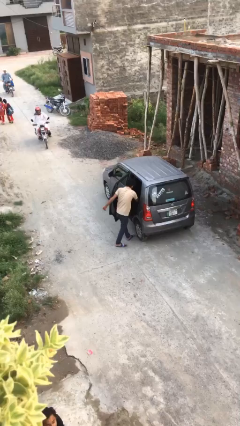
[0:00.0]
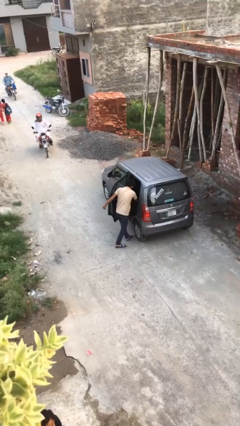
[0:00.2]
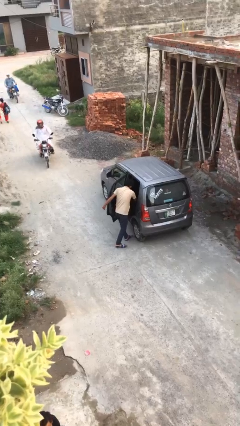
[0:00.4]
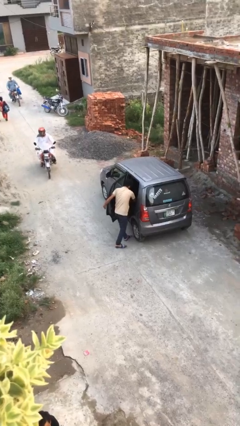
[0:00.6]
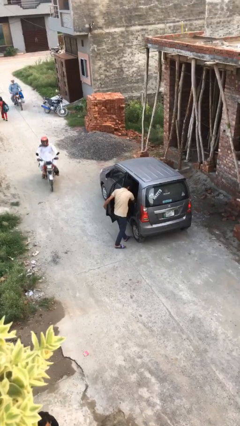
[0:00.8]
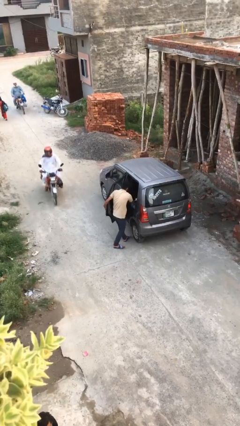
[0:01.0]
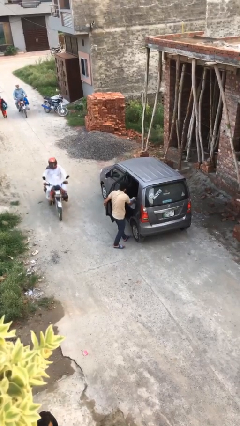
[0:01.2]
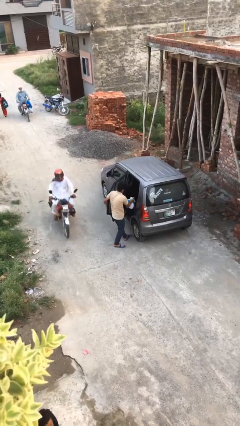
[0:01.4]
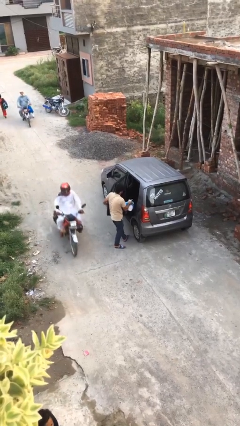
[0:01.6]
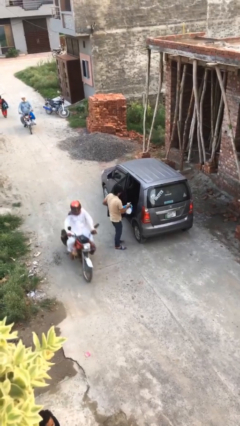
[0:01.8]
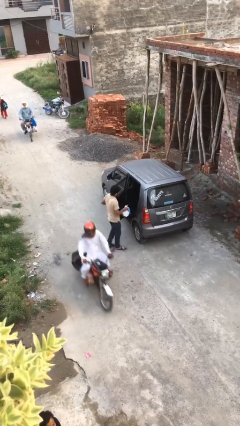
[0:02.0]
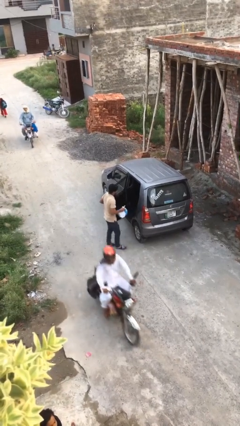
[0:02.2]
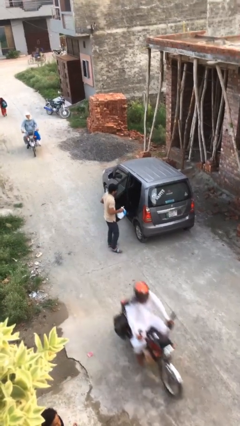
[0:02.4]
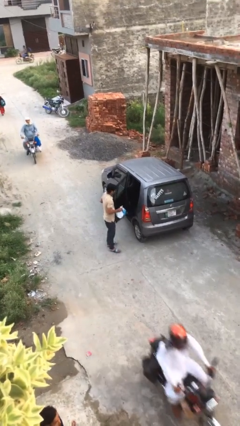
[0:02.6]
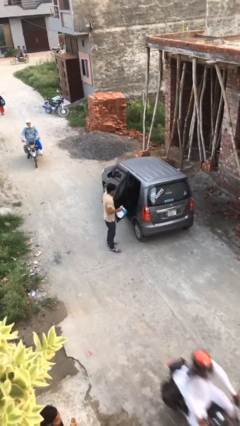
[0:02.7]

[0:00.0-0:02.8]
person unloads car

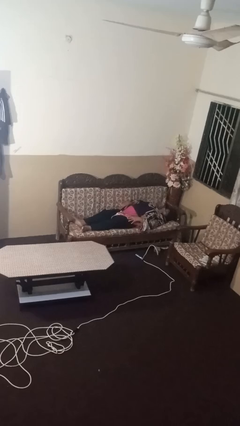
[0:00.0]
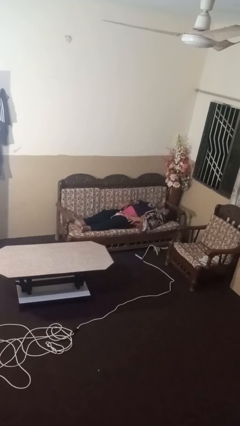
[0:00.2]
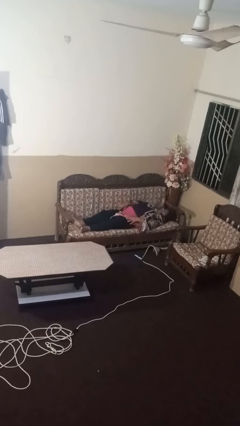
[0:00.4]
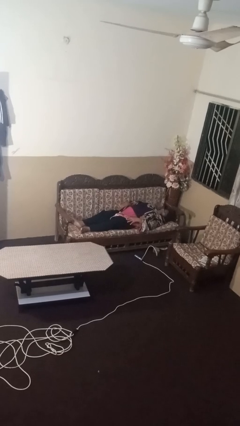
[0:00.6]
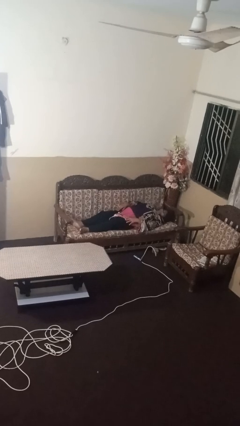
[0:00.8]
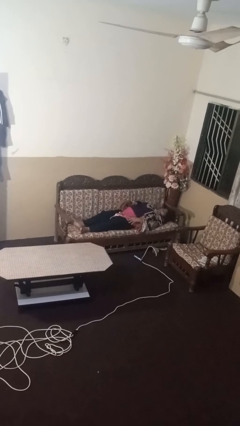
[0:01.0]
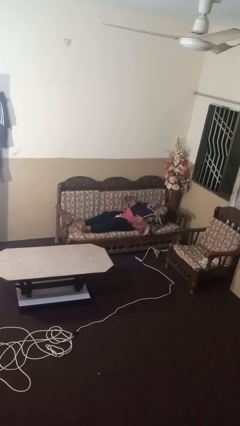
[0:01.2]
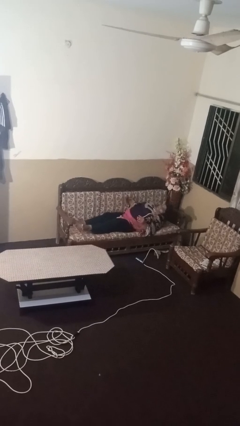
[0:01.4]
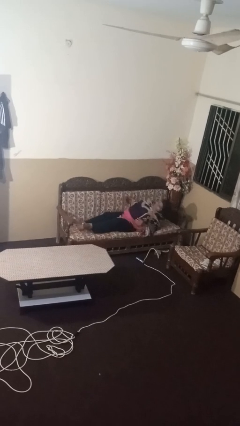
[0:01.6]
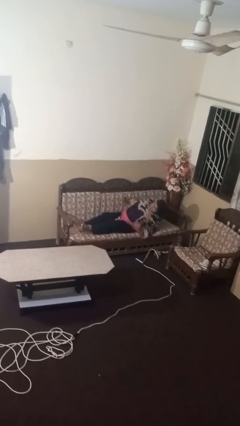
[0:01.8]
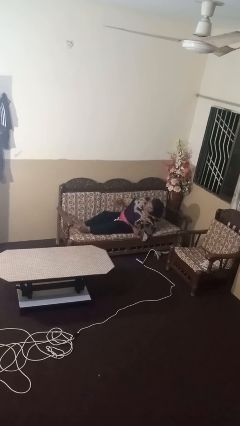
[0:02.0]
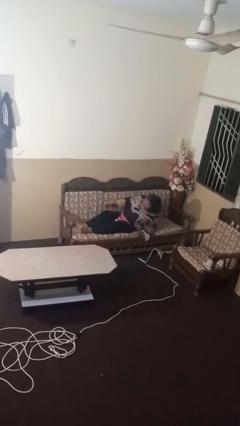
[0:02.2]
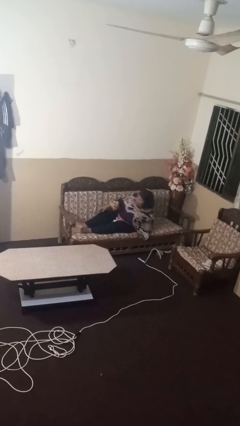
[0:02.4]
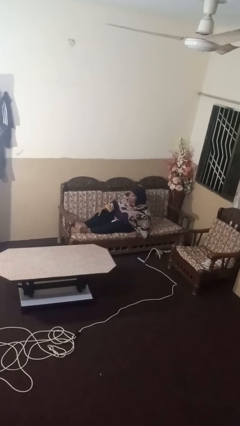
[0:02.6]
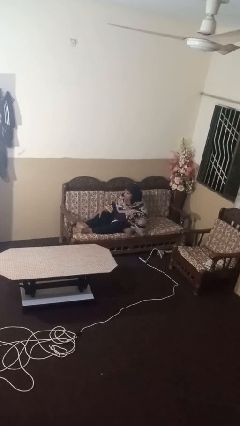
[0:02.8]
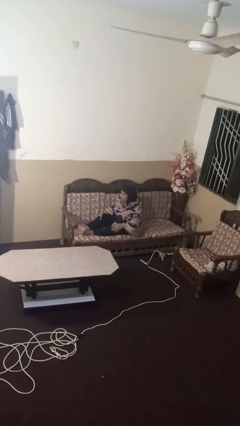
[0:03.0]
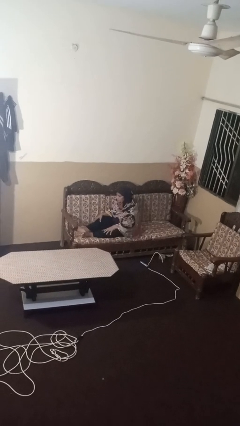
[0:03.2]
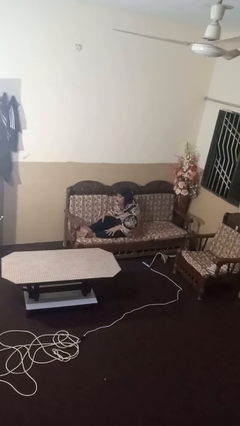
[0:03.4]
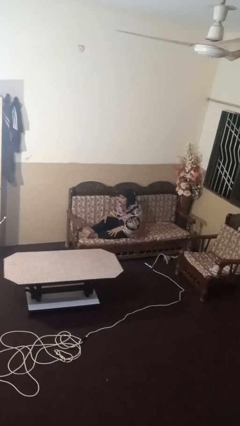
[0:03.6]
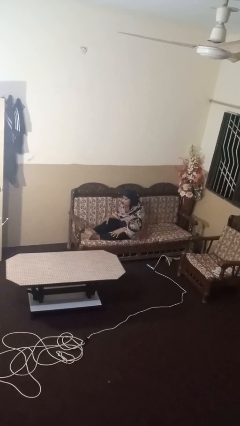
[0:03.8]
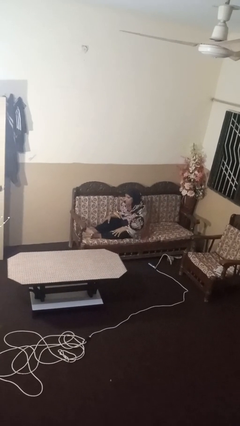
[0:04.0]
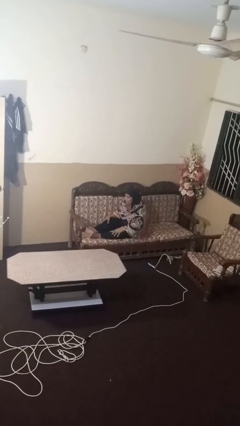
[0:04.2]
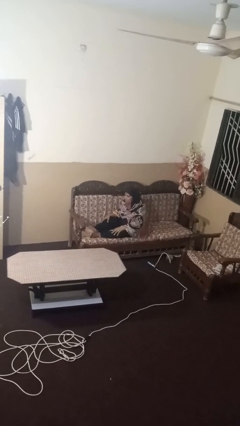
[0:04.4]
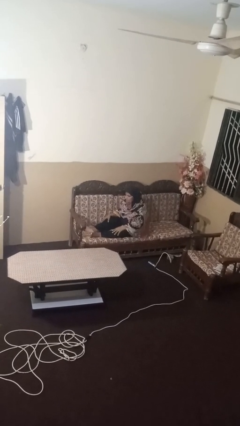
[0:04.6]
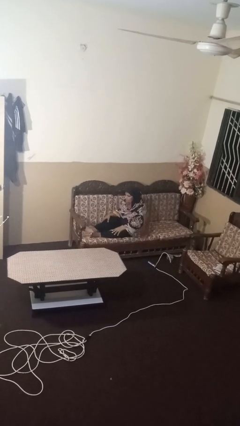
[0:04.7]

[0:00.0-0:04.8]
person stands up

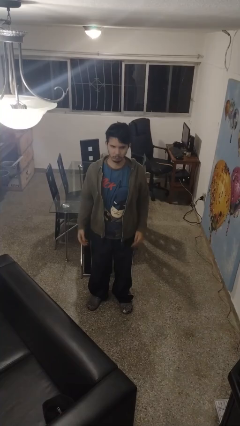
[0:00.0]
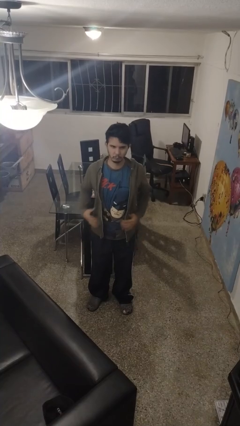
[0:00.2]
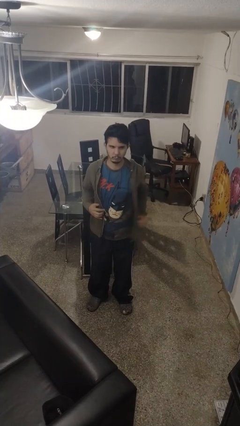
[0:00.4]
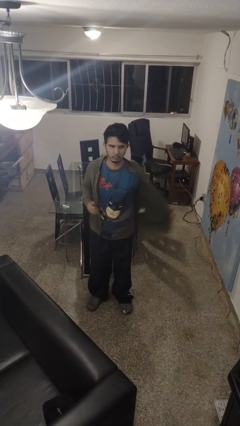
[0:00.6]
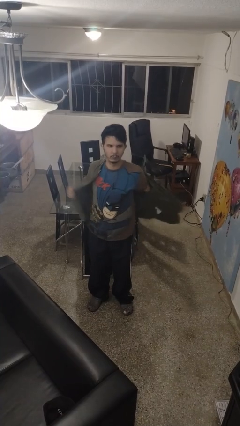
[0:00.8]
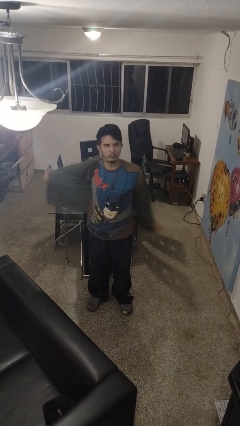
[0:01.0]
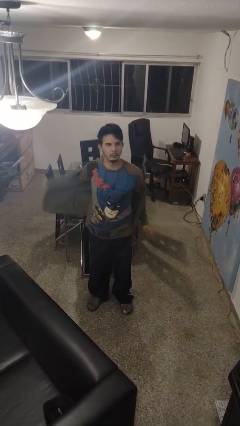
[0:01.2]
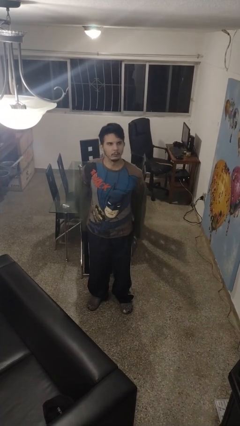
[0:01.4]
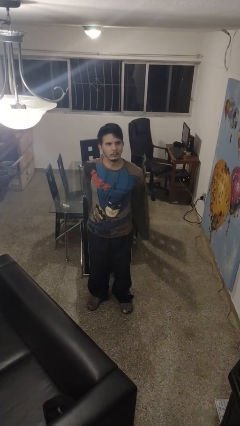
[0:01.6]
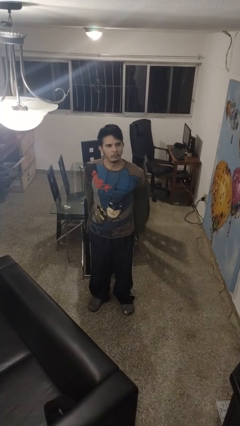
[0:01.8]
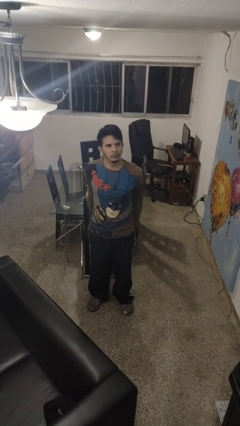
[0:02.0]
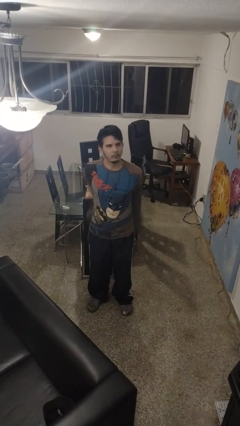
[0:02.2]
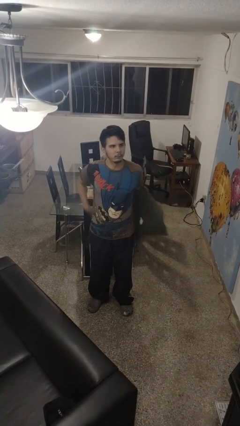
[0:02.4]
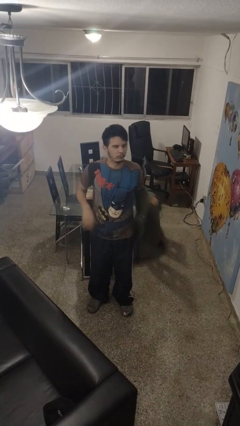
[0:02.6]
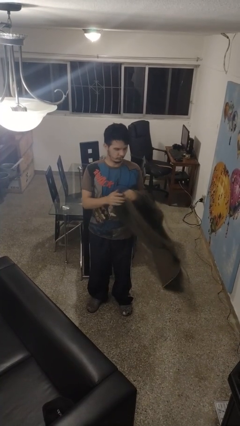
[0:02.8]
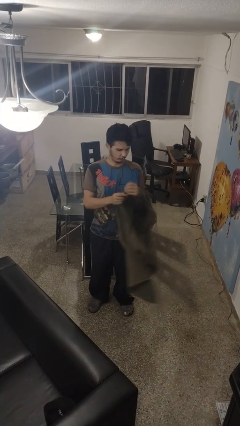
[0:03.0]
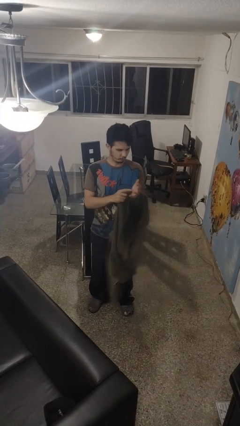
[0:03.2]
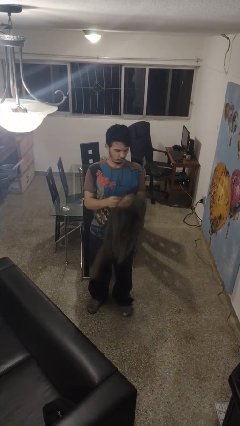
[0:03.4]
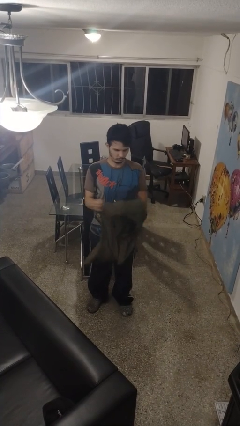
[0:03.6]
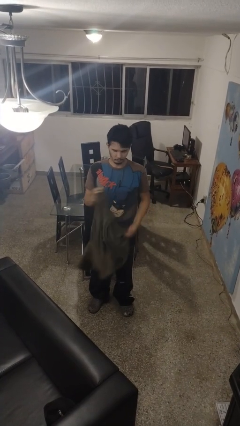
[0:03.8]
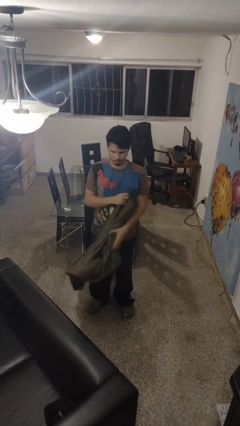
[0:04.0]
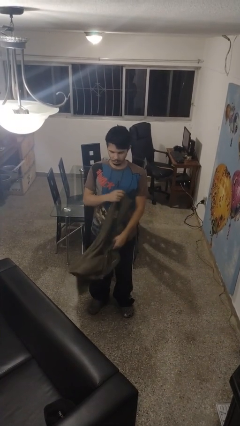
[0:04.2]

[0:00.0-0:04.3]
person takes off jacket

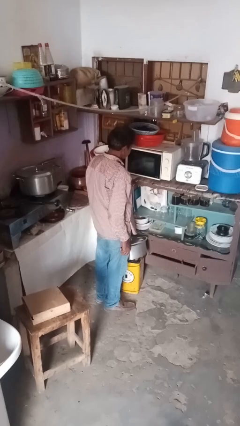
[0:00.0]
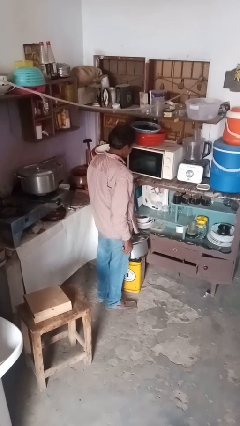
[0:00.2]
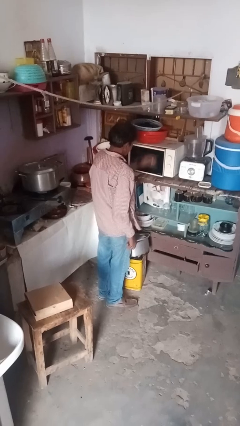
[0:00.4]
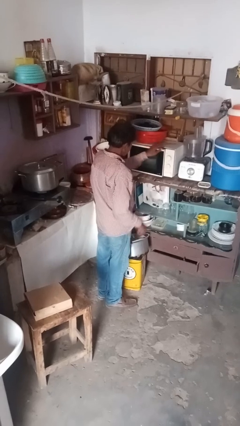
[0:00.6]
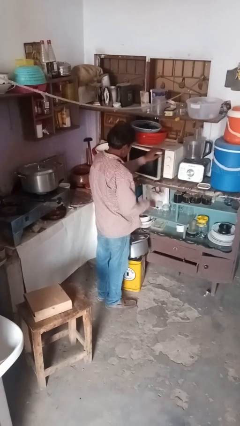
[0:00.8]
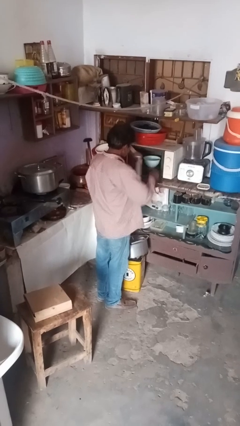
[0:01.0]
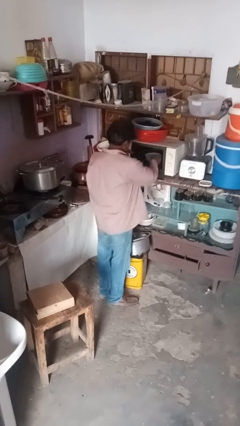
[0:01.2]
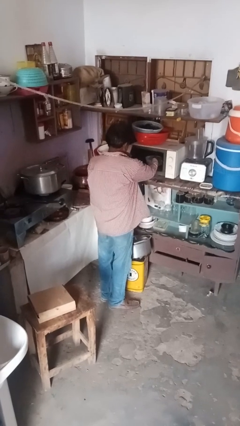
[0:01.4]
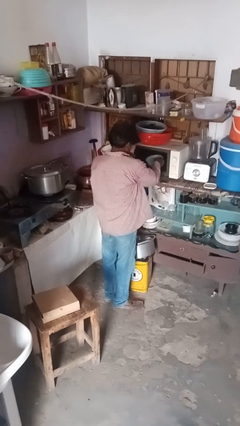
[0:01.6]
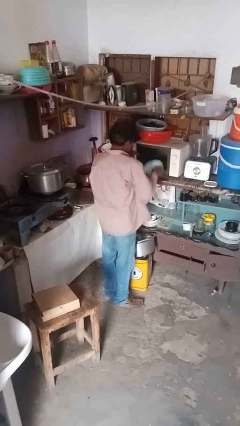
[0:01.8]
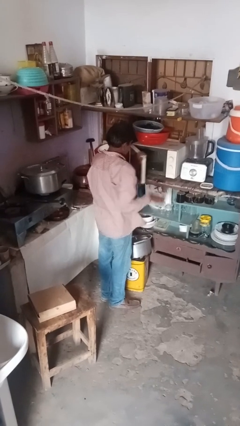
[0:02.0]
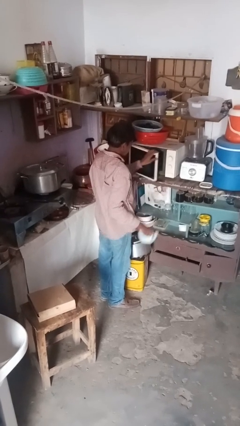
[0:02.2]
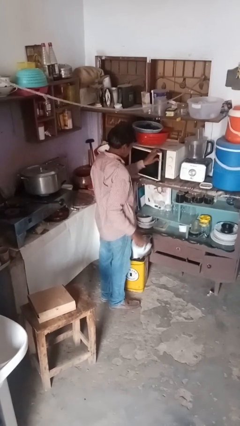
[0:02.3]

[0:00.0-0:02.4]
person takes object from microwave

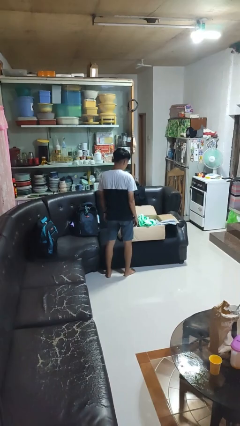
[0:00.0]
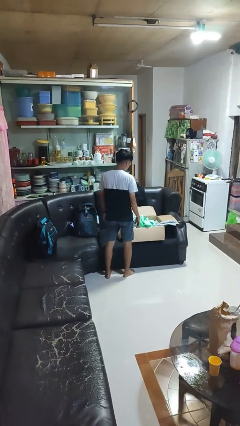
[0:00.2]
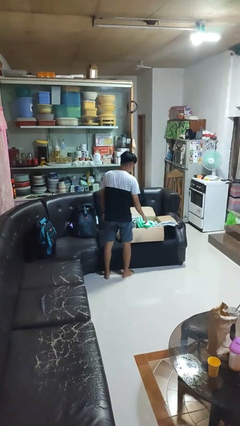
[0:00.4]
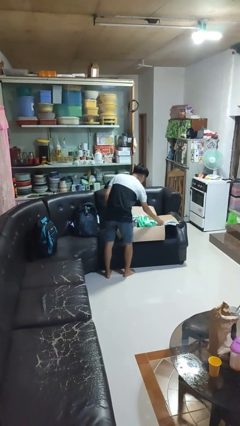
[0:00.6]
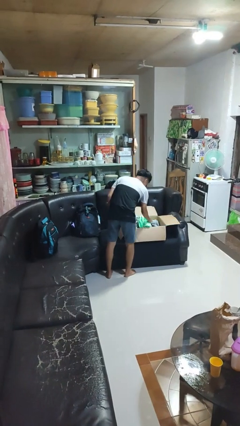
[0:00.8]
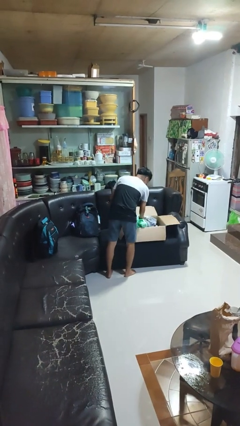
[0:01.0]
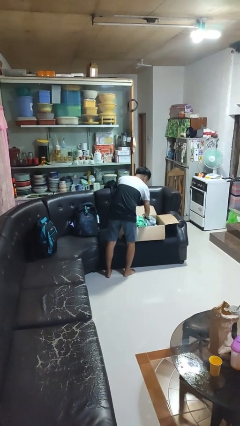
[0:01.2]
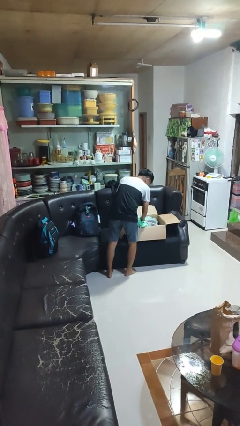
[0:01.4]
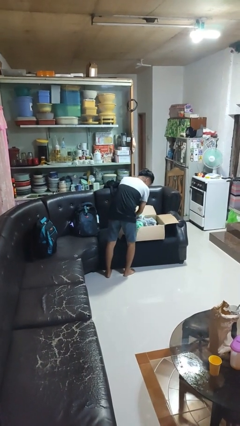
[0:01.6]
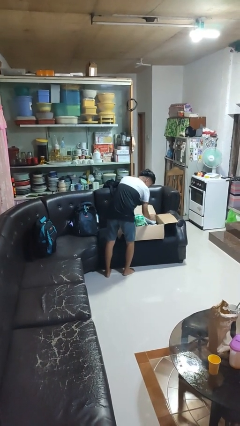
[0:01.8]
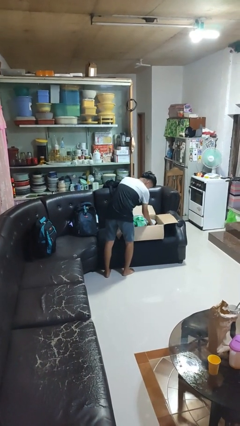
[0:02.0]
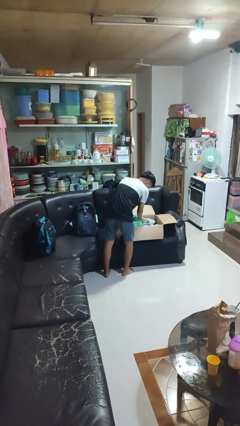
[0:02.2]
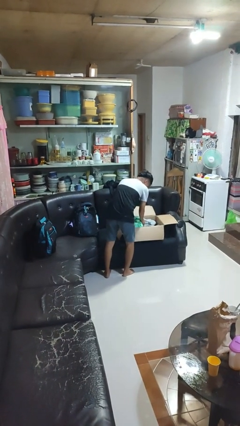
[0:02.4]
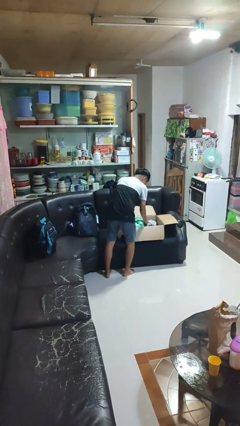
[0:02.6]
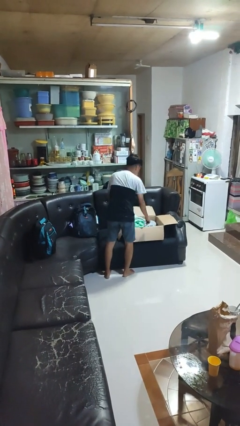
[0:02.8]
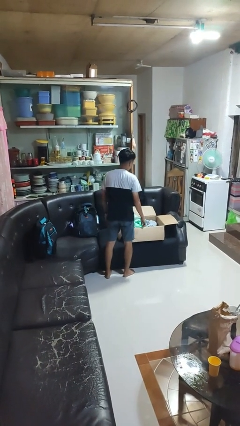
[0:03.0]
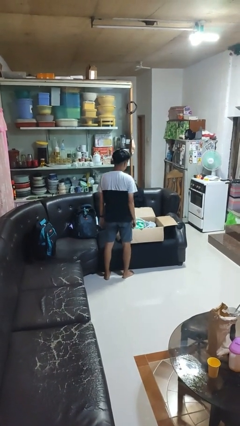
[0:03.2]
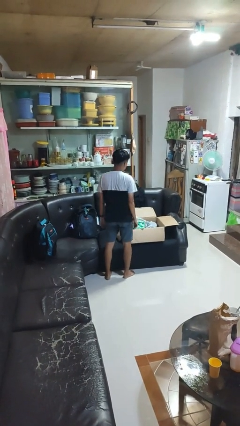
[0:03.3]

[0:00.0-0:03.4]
person searches in box
